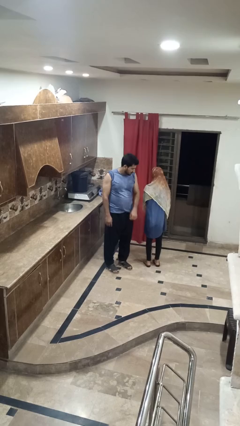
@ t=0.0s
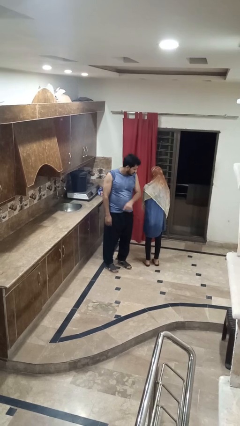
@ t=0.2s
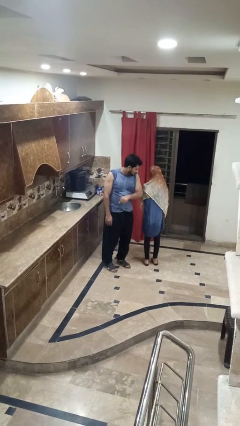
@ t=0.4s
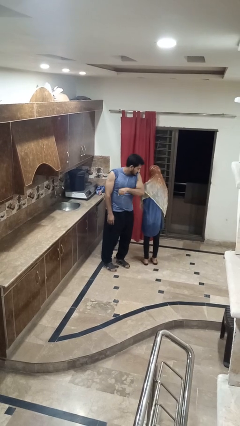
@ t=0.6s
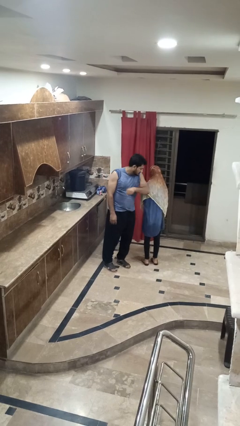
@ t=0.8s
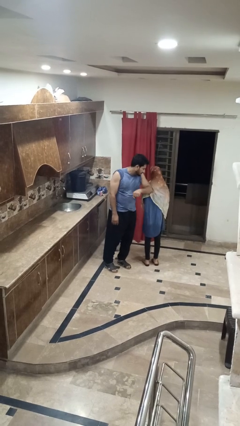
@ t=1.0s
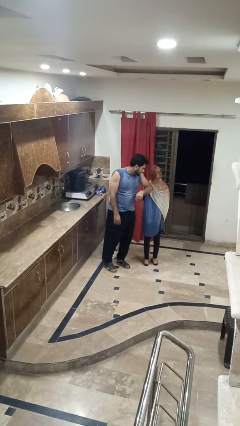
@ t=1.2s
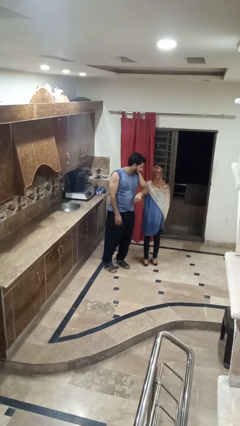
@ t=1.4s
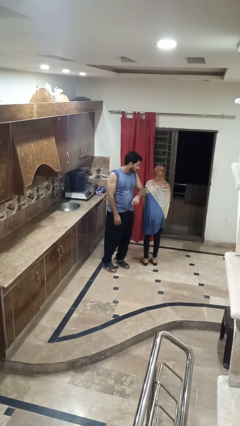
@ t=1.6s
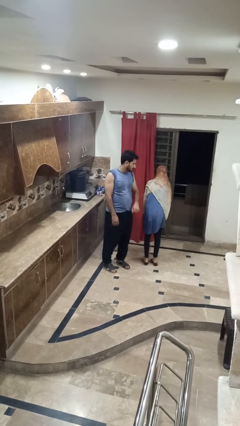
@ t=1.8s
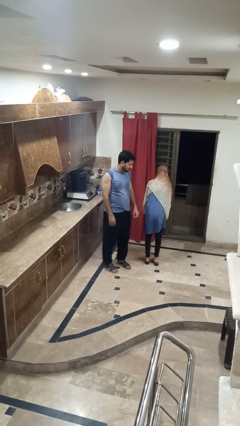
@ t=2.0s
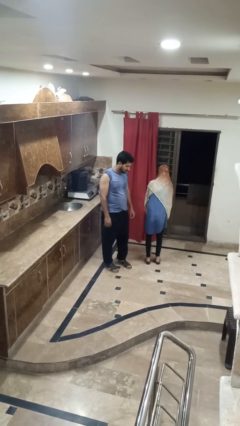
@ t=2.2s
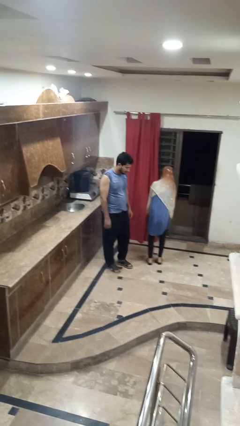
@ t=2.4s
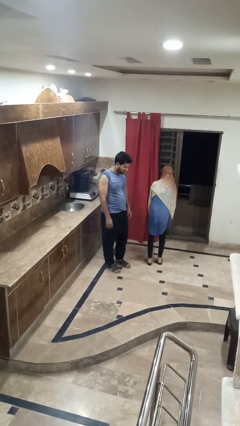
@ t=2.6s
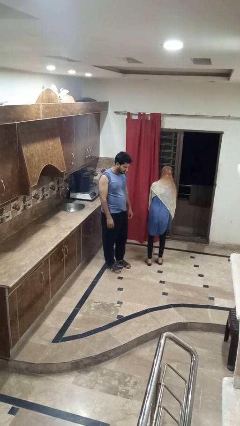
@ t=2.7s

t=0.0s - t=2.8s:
person nudges person with elbow

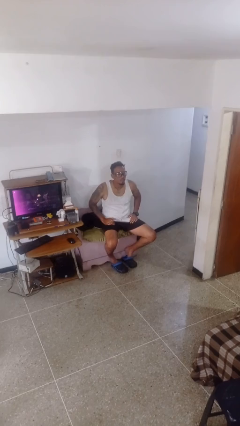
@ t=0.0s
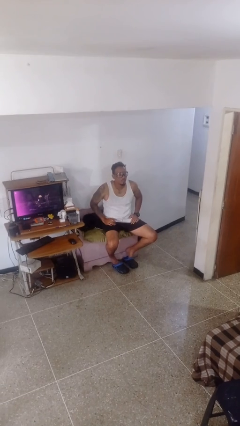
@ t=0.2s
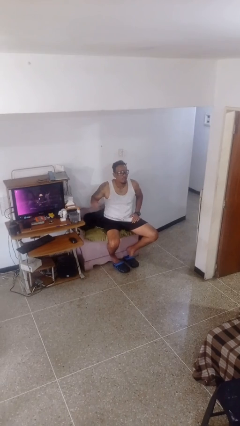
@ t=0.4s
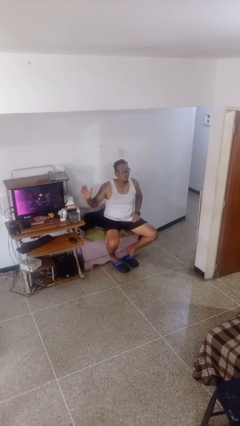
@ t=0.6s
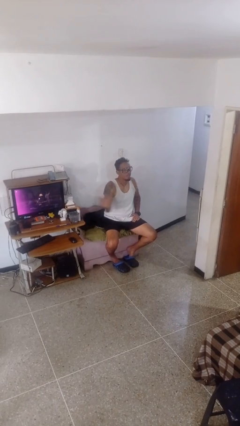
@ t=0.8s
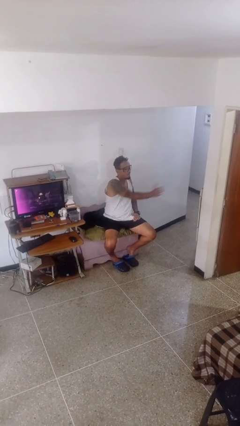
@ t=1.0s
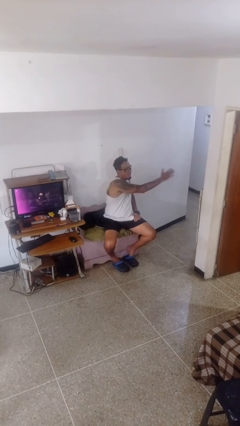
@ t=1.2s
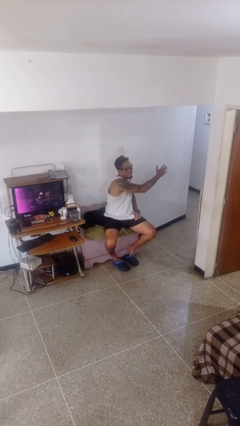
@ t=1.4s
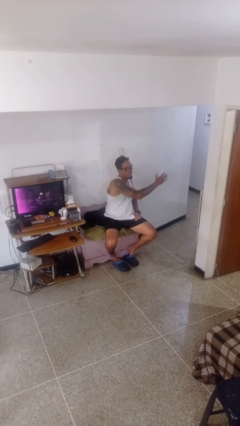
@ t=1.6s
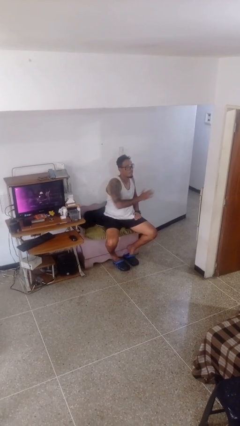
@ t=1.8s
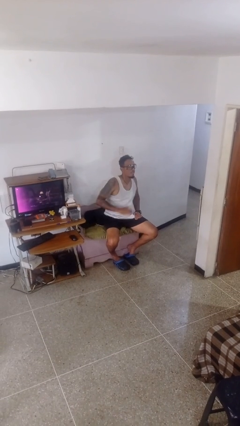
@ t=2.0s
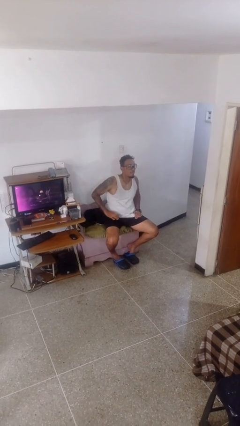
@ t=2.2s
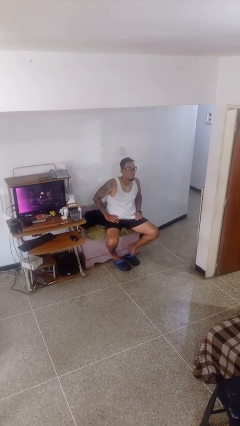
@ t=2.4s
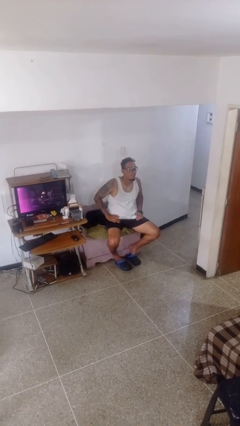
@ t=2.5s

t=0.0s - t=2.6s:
person gestures swipe left

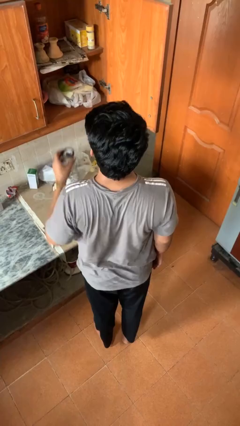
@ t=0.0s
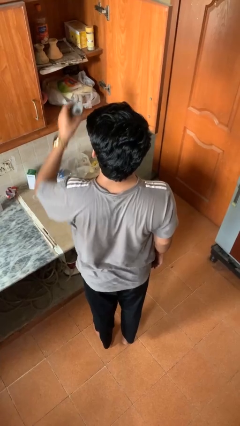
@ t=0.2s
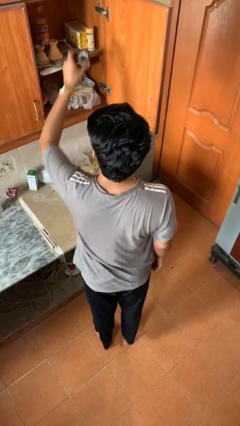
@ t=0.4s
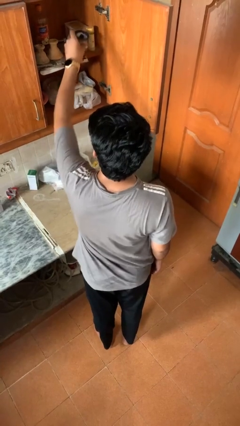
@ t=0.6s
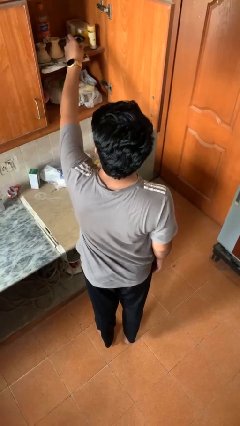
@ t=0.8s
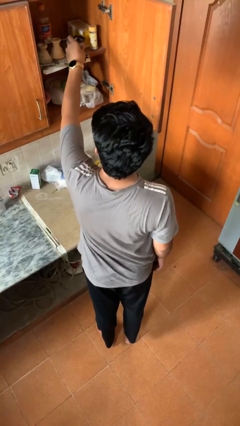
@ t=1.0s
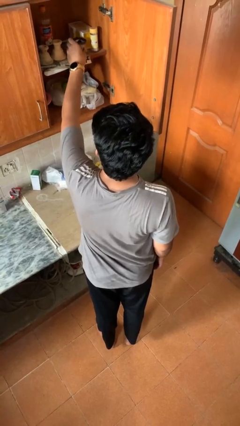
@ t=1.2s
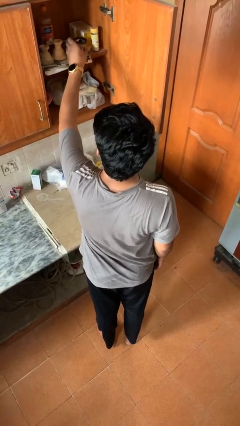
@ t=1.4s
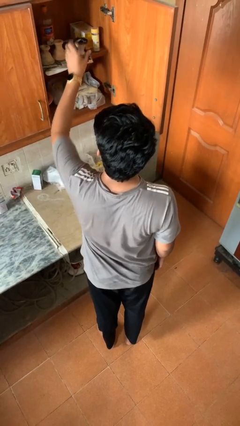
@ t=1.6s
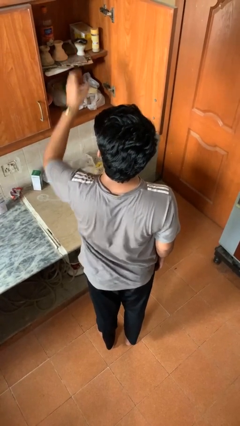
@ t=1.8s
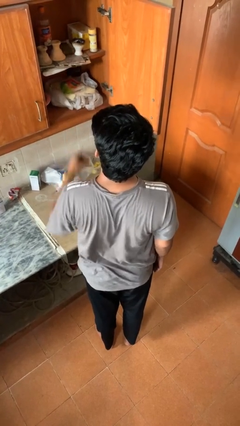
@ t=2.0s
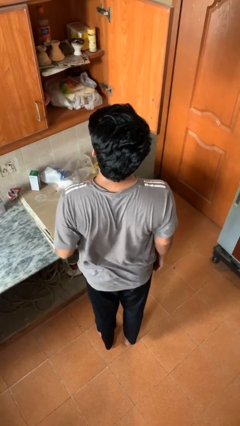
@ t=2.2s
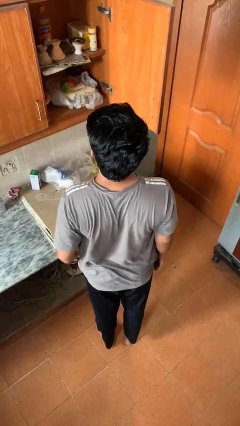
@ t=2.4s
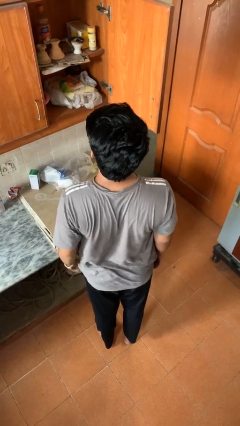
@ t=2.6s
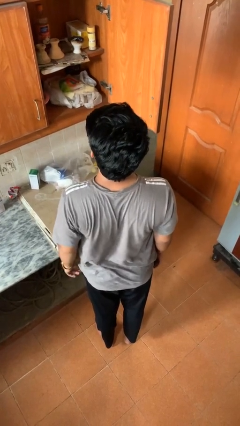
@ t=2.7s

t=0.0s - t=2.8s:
person puts object in cabinet

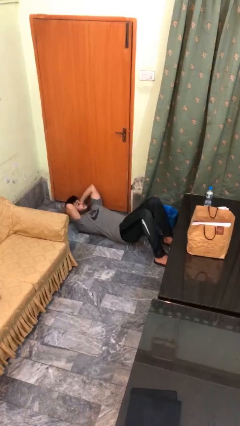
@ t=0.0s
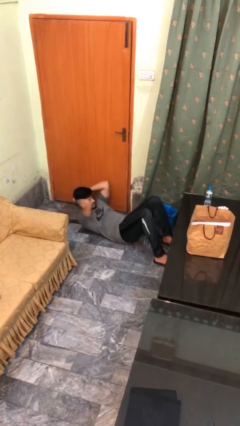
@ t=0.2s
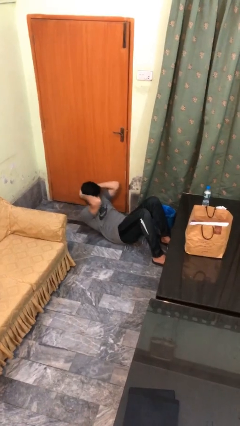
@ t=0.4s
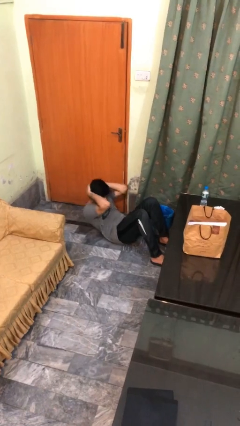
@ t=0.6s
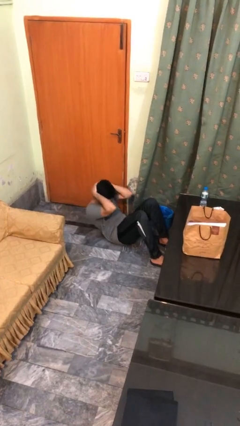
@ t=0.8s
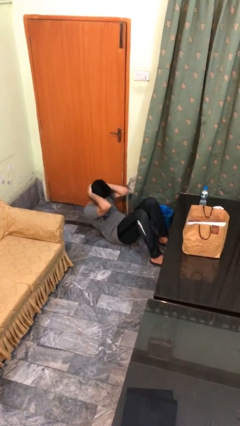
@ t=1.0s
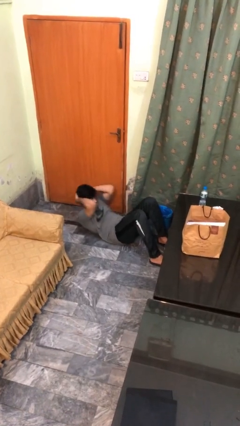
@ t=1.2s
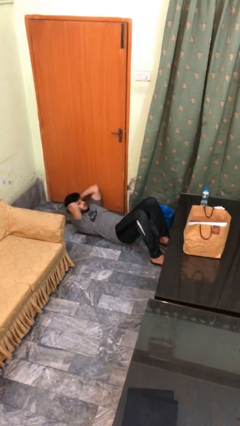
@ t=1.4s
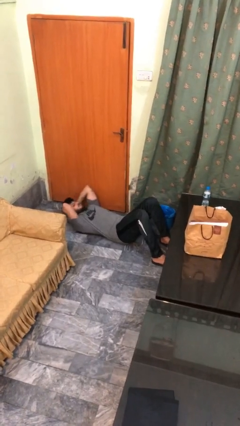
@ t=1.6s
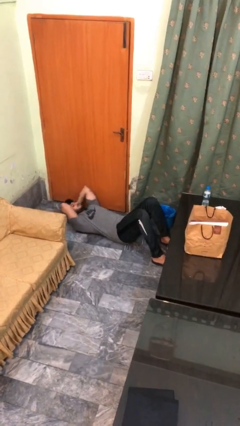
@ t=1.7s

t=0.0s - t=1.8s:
person exercises with situp

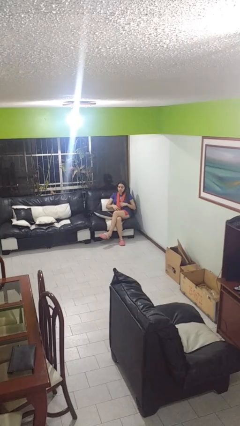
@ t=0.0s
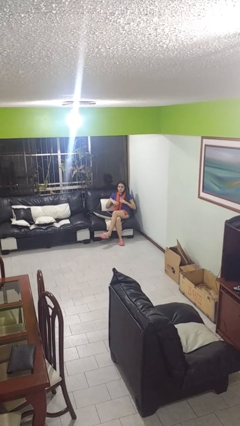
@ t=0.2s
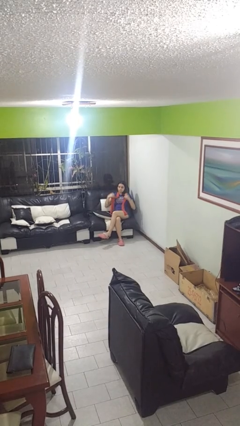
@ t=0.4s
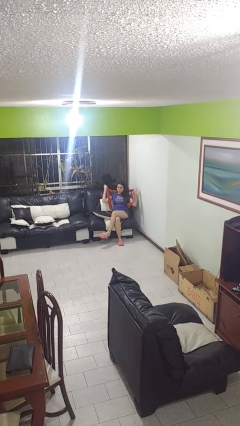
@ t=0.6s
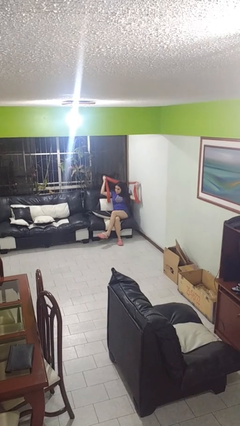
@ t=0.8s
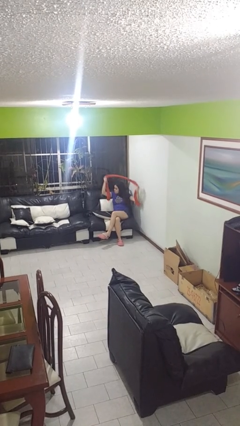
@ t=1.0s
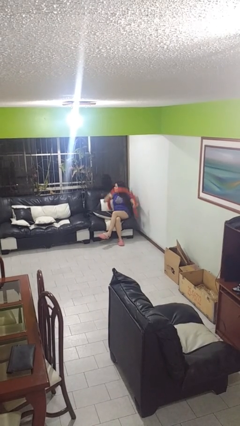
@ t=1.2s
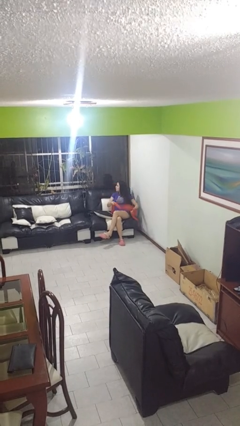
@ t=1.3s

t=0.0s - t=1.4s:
person takes off scarf

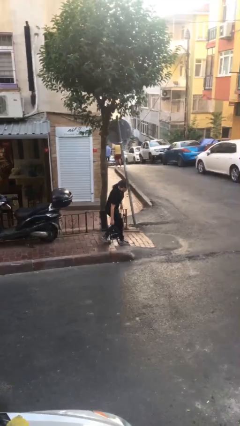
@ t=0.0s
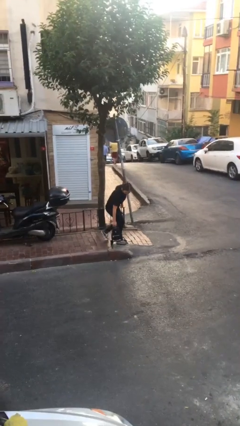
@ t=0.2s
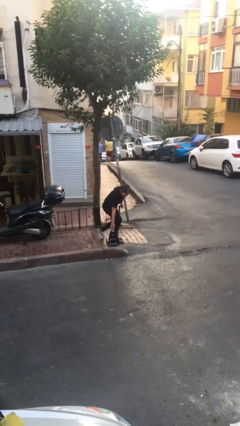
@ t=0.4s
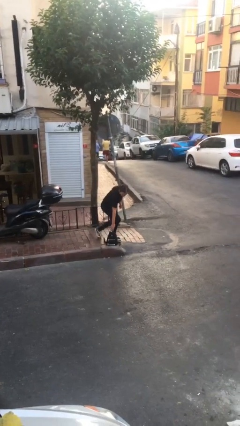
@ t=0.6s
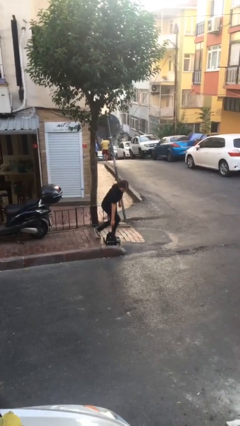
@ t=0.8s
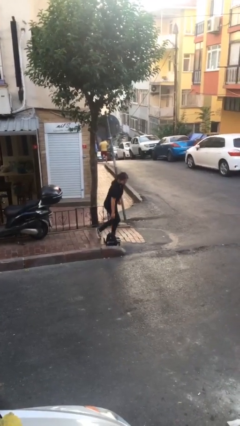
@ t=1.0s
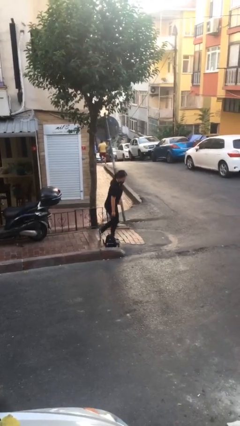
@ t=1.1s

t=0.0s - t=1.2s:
person puts down object on floor

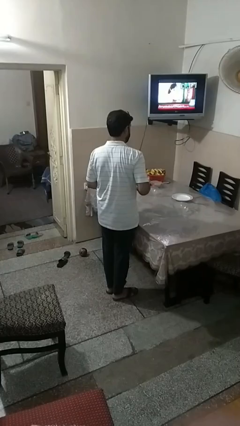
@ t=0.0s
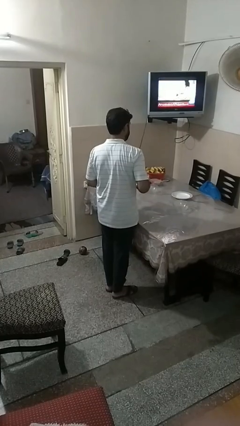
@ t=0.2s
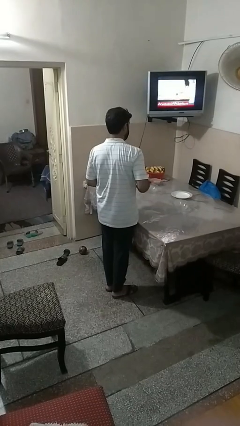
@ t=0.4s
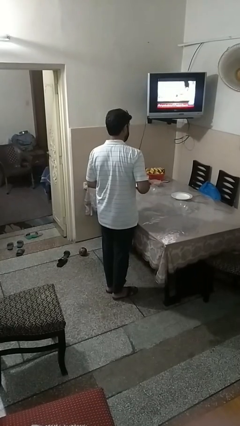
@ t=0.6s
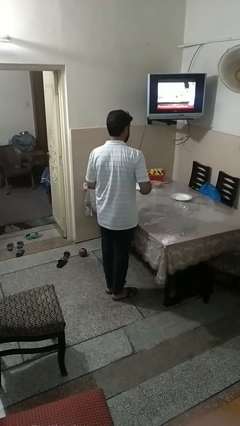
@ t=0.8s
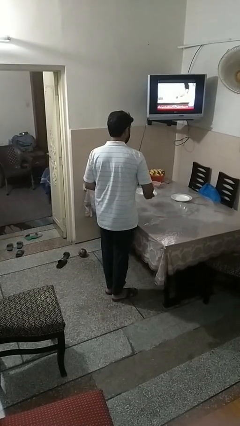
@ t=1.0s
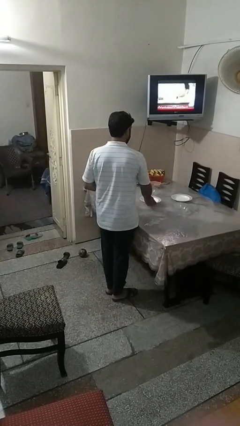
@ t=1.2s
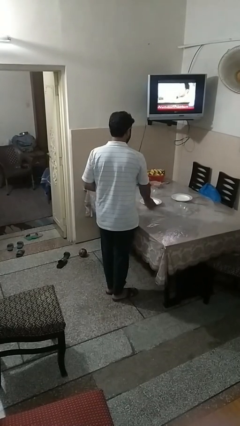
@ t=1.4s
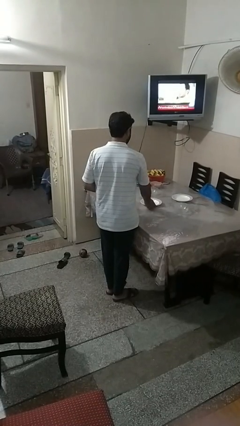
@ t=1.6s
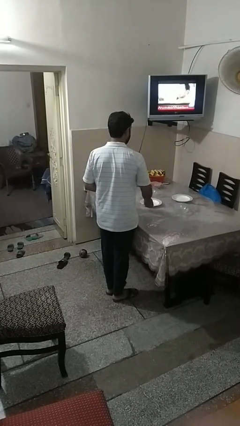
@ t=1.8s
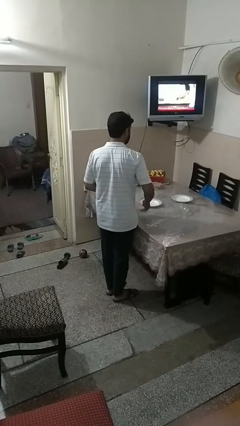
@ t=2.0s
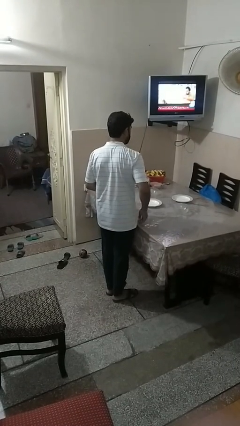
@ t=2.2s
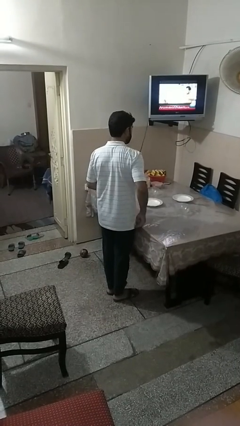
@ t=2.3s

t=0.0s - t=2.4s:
person sets table

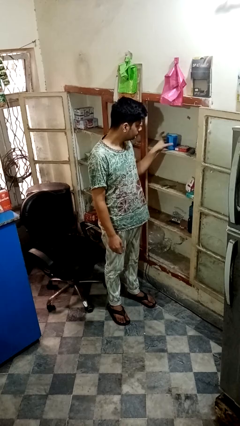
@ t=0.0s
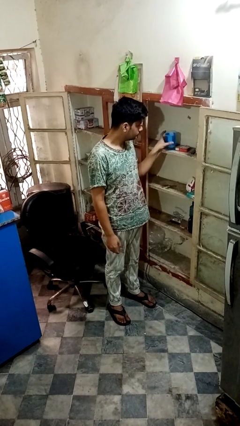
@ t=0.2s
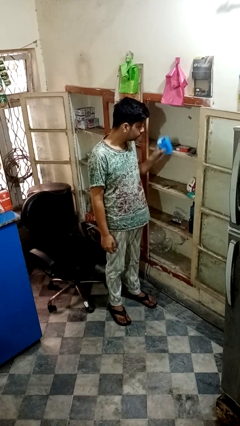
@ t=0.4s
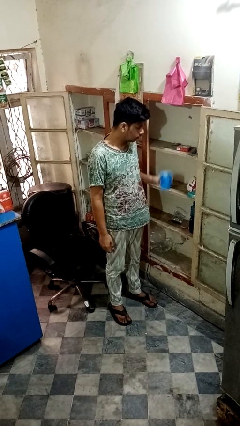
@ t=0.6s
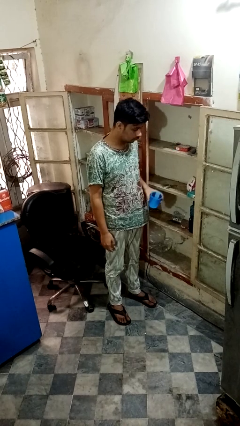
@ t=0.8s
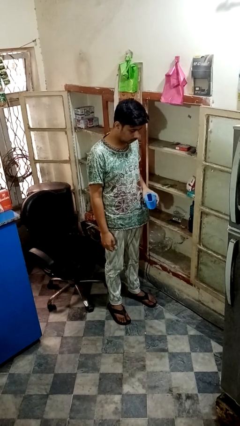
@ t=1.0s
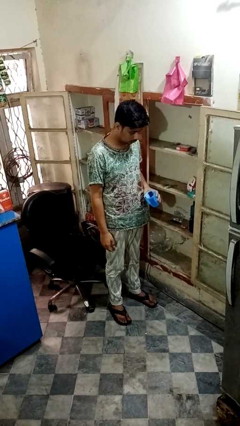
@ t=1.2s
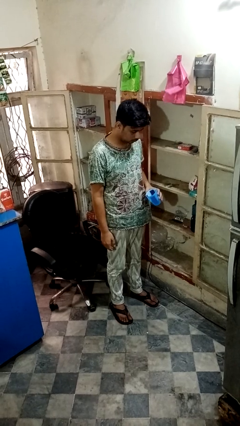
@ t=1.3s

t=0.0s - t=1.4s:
person takes object from cabinet

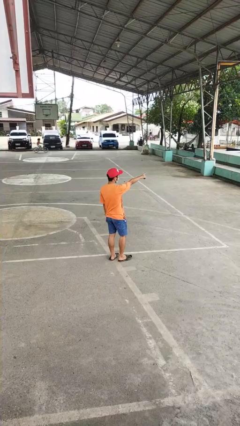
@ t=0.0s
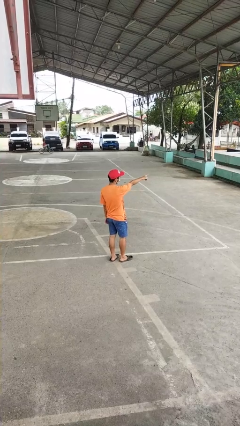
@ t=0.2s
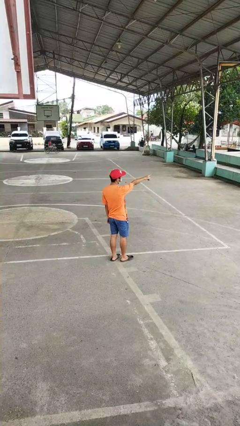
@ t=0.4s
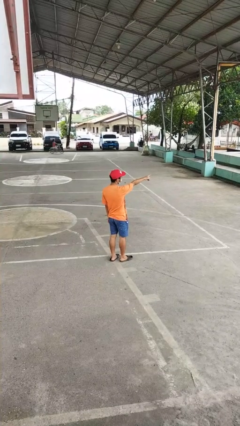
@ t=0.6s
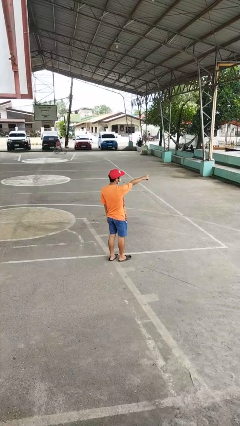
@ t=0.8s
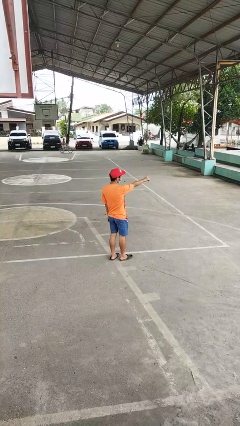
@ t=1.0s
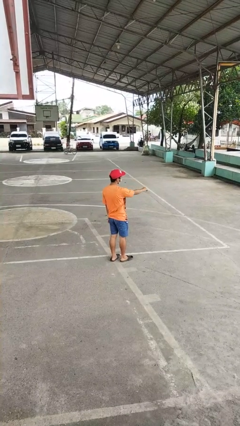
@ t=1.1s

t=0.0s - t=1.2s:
person points at person
